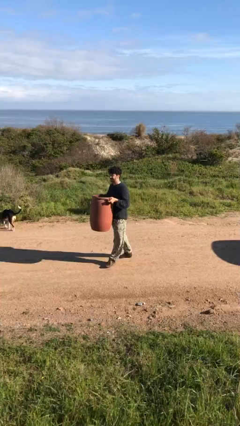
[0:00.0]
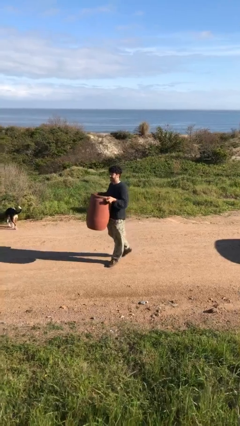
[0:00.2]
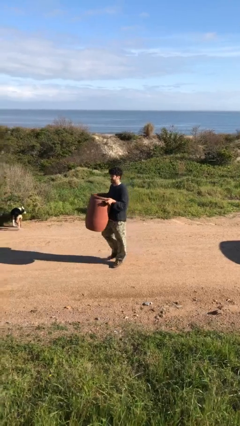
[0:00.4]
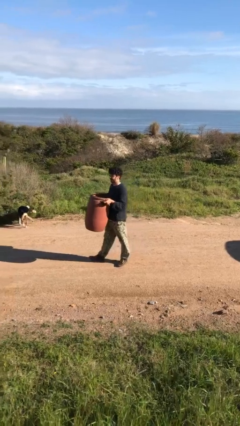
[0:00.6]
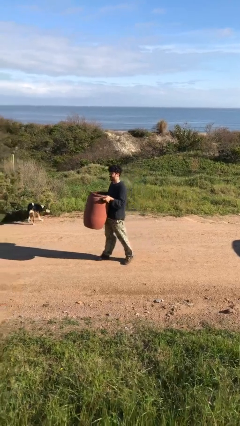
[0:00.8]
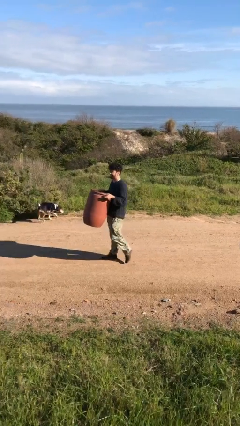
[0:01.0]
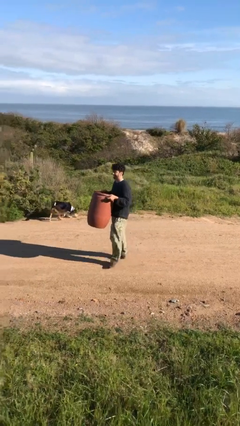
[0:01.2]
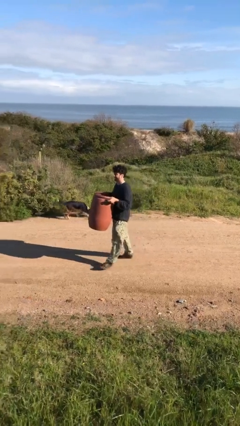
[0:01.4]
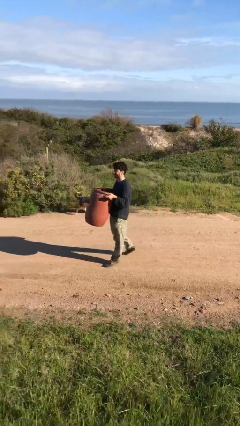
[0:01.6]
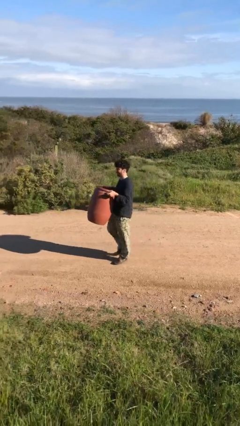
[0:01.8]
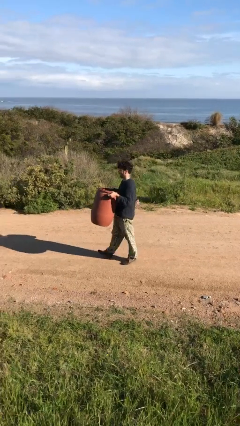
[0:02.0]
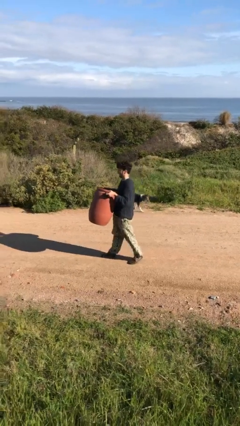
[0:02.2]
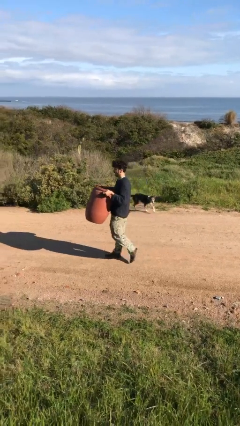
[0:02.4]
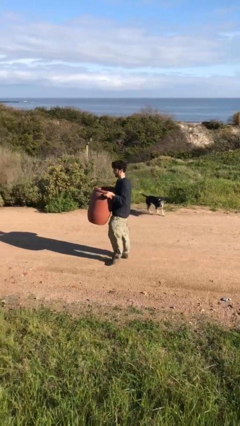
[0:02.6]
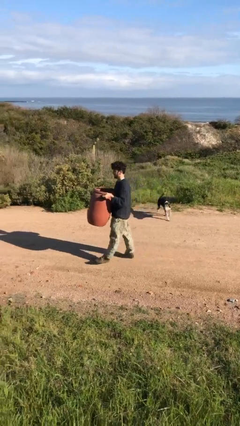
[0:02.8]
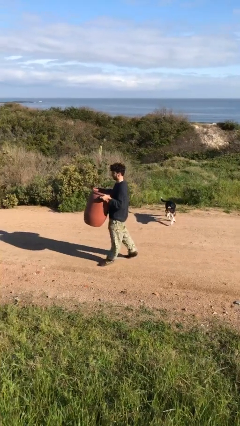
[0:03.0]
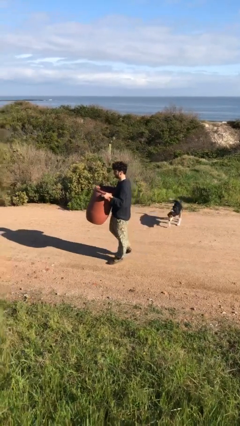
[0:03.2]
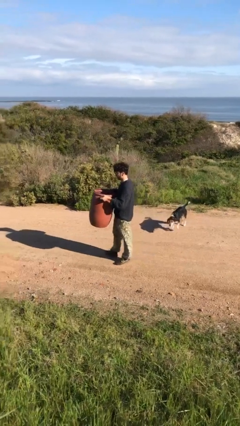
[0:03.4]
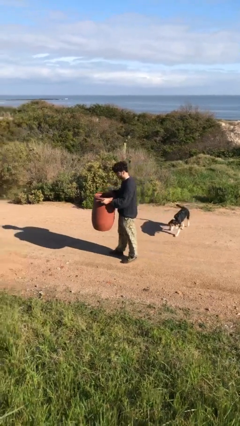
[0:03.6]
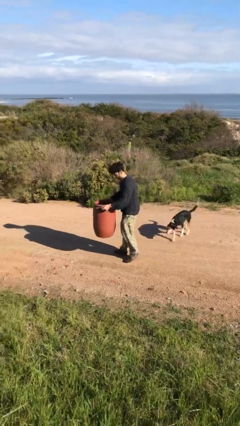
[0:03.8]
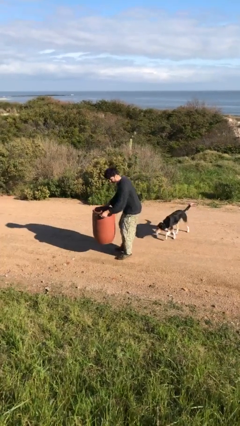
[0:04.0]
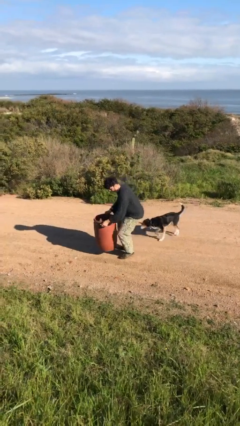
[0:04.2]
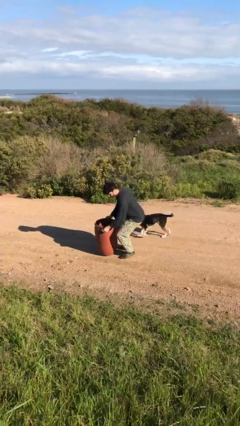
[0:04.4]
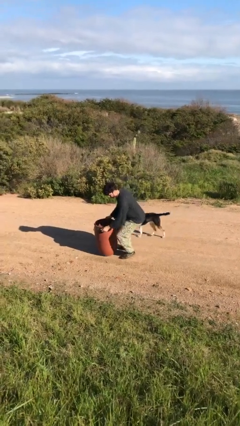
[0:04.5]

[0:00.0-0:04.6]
person carries heavy object

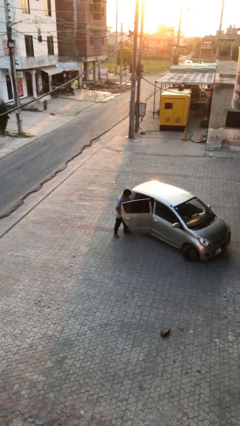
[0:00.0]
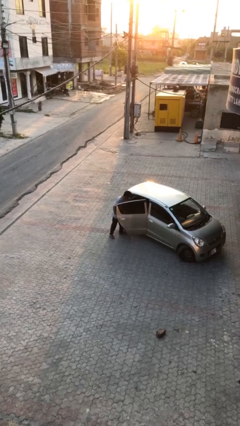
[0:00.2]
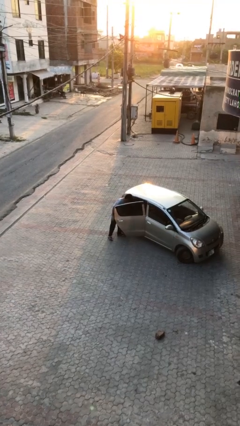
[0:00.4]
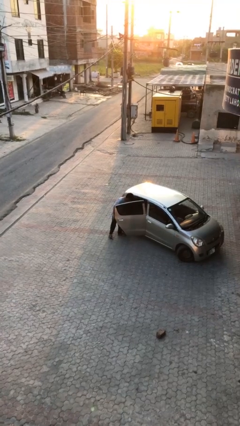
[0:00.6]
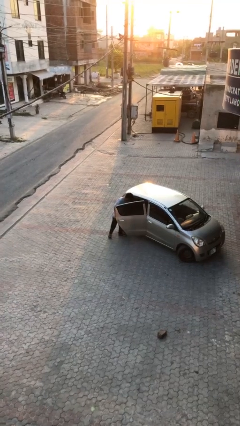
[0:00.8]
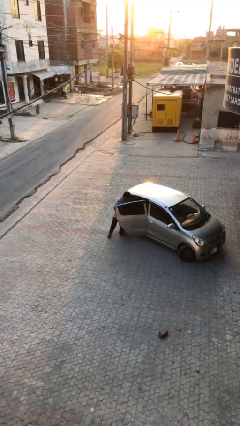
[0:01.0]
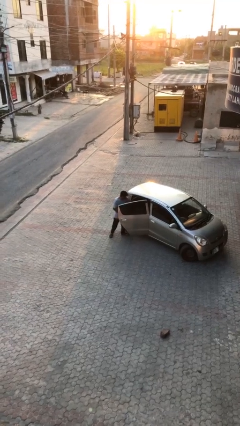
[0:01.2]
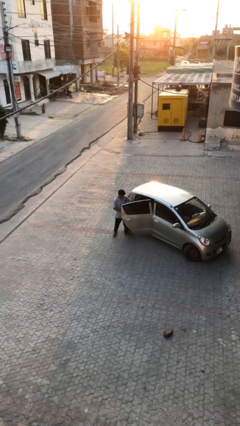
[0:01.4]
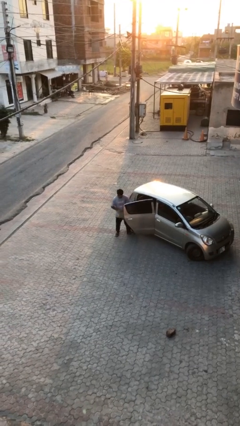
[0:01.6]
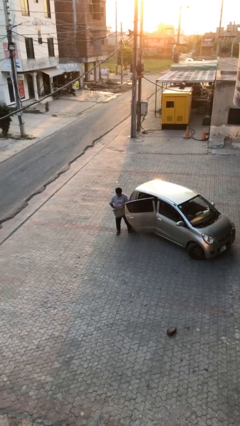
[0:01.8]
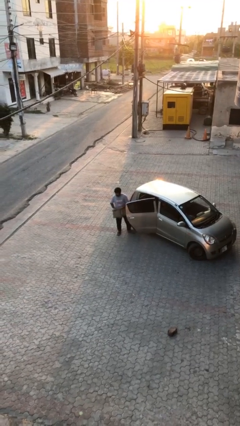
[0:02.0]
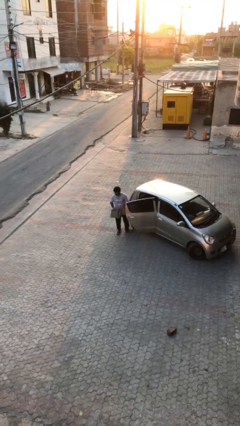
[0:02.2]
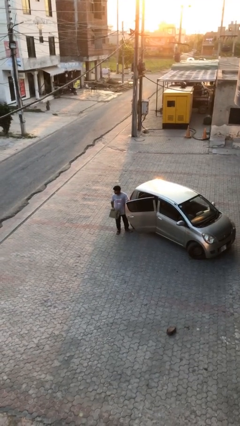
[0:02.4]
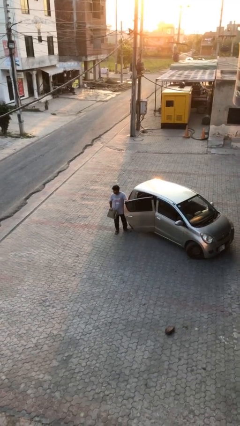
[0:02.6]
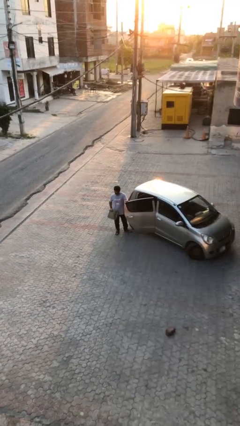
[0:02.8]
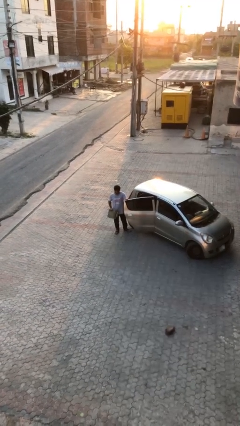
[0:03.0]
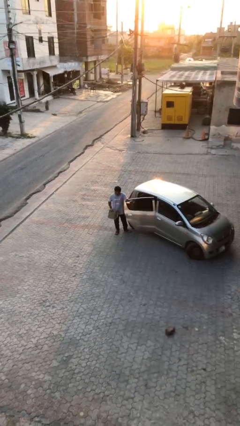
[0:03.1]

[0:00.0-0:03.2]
person unloads car

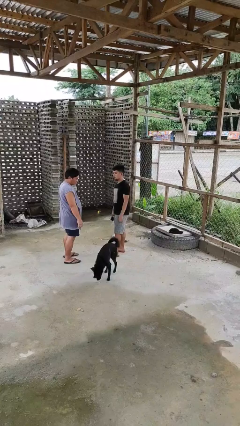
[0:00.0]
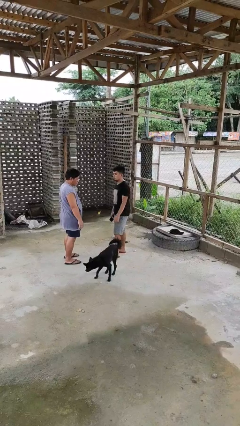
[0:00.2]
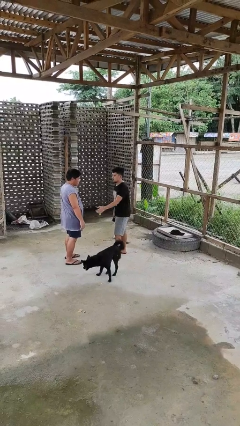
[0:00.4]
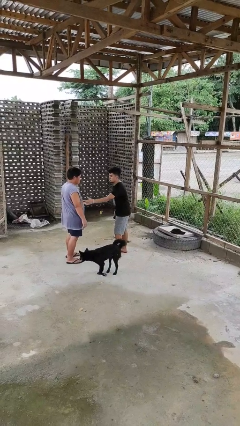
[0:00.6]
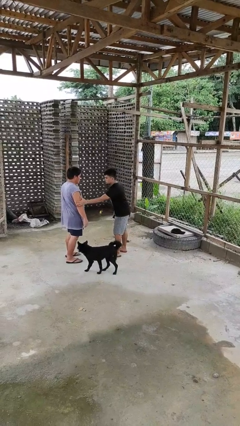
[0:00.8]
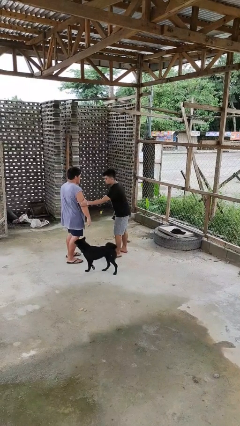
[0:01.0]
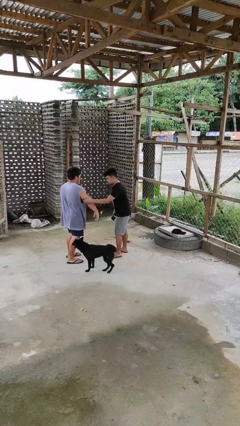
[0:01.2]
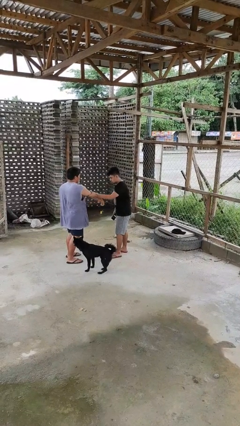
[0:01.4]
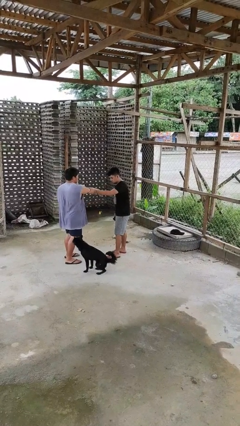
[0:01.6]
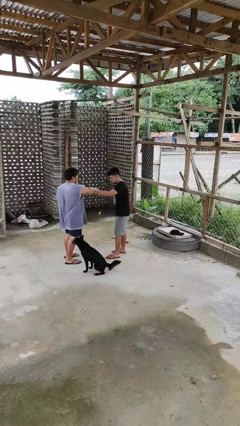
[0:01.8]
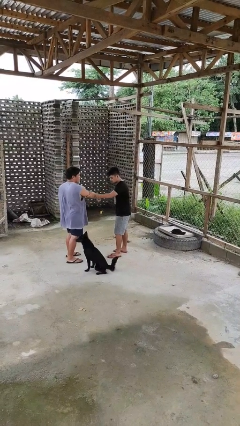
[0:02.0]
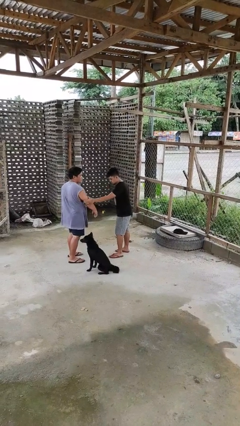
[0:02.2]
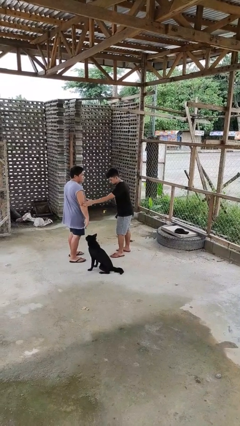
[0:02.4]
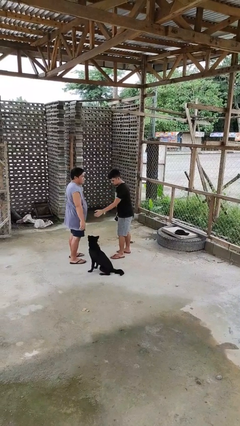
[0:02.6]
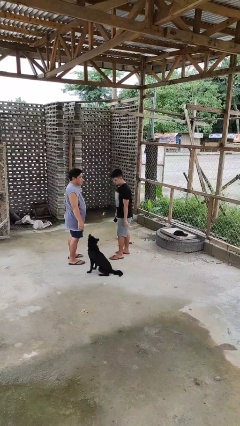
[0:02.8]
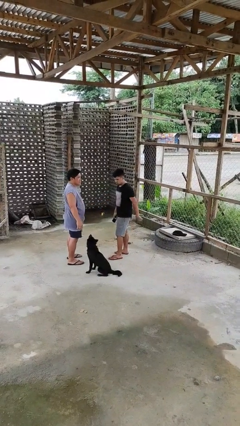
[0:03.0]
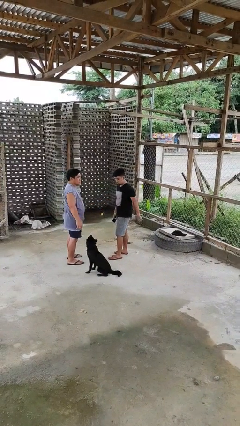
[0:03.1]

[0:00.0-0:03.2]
person grabs person by bicep

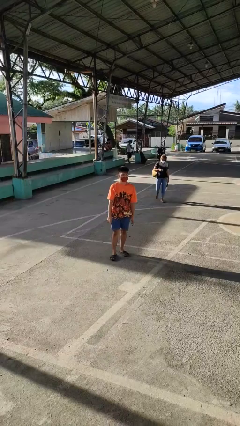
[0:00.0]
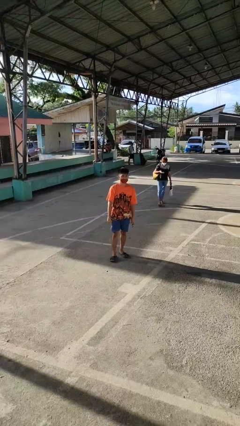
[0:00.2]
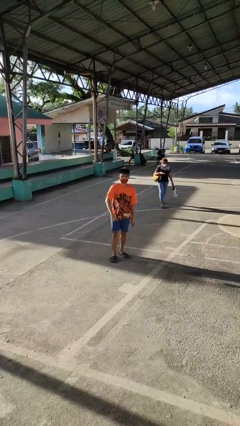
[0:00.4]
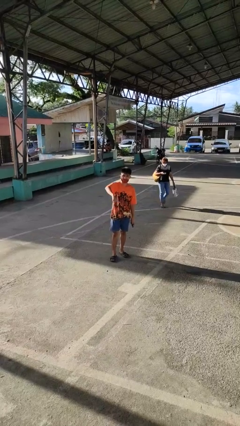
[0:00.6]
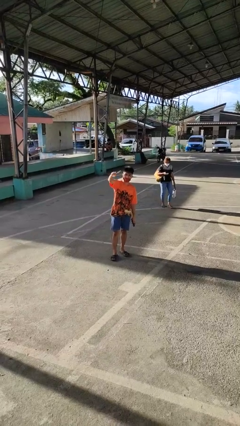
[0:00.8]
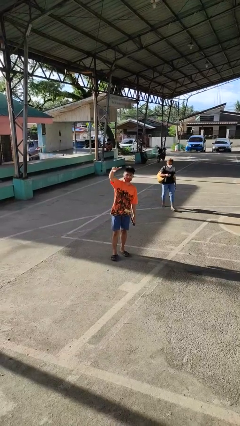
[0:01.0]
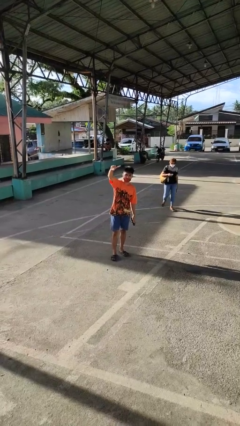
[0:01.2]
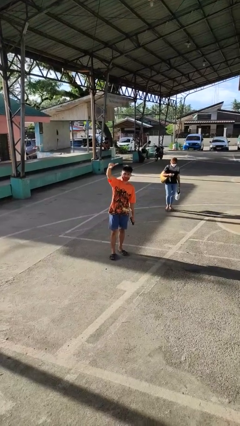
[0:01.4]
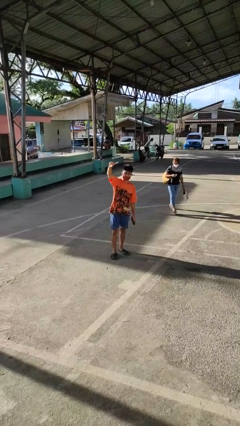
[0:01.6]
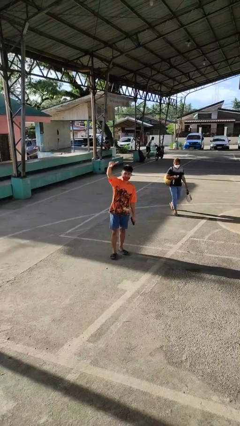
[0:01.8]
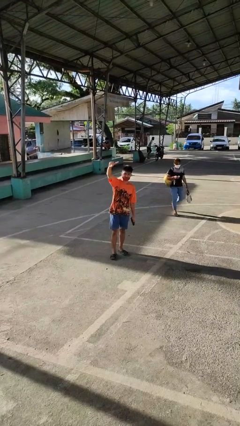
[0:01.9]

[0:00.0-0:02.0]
person gestures swipe up

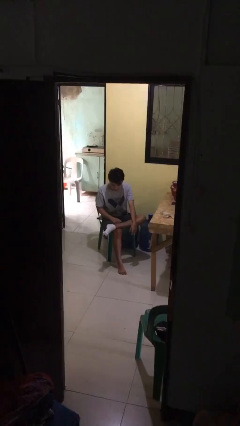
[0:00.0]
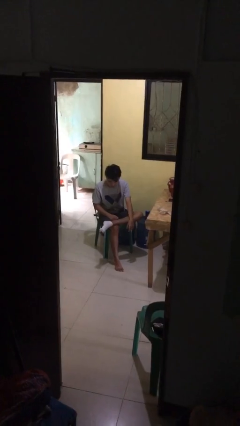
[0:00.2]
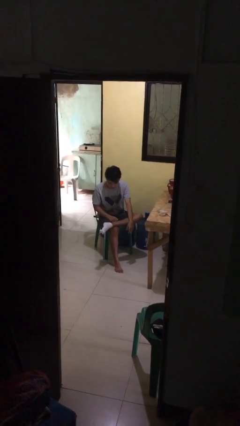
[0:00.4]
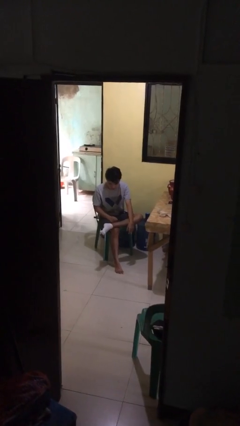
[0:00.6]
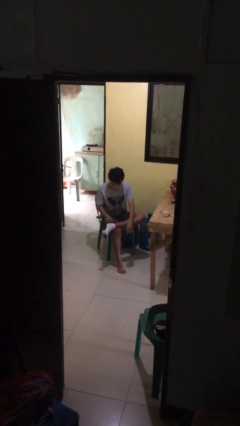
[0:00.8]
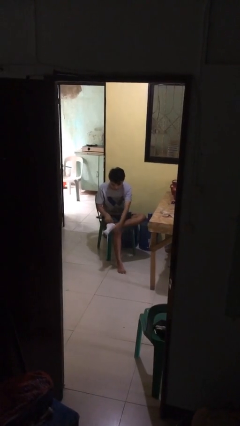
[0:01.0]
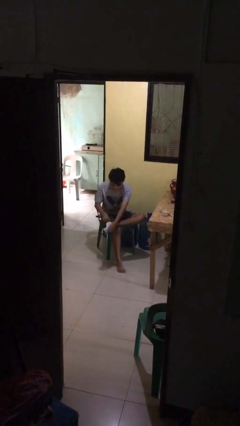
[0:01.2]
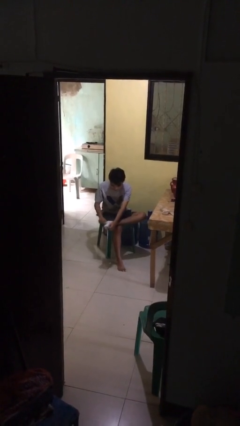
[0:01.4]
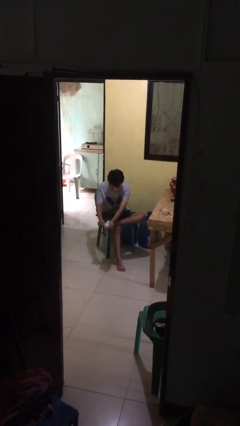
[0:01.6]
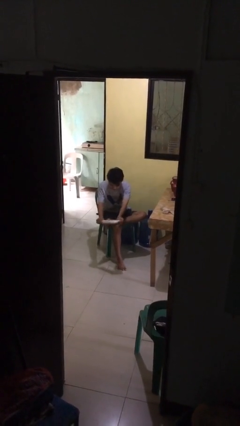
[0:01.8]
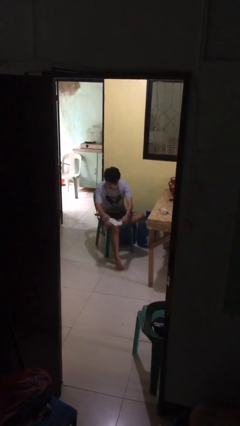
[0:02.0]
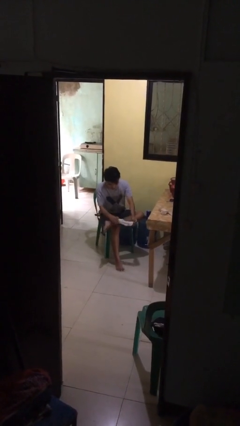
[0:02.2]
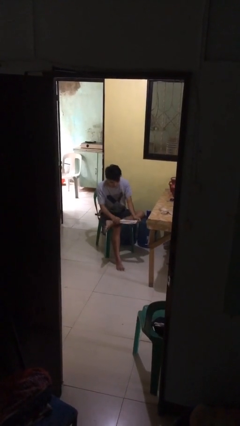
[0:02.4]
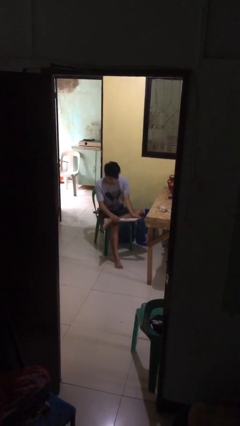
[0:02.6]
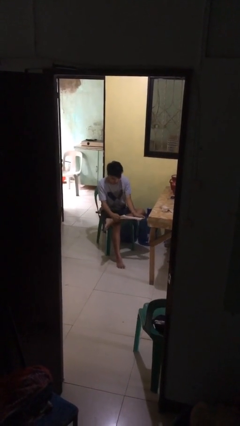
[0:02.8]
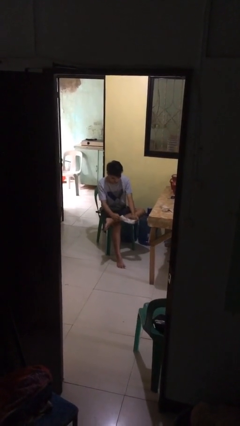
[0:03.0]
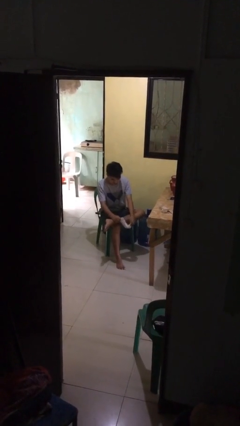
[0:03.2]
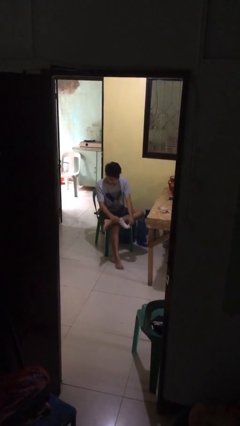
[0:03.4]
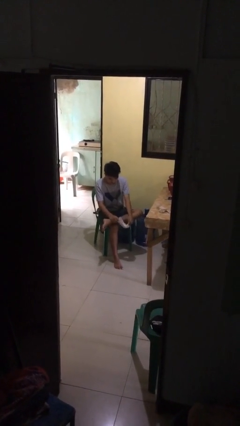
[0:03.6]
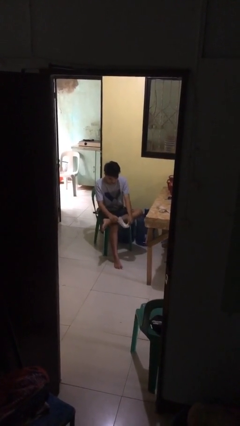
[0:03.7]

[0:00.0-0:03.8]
person takes off socks

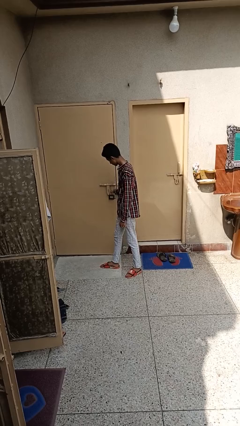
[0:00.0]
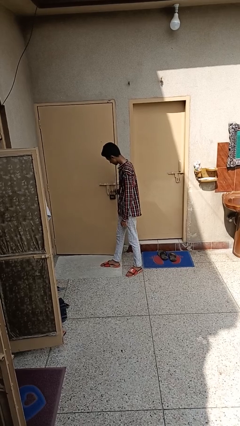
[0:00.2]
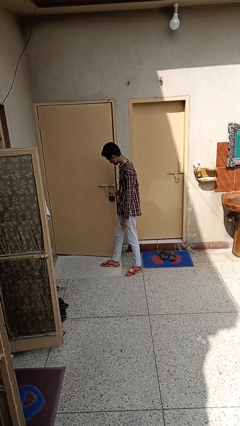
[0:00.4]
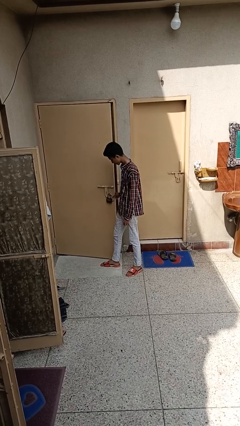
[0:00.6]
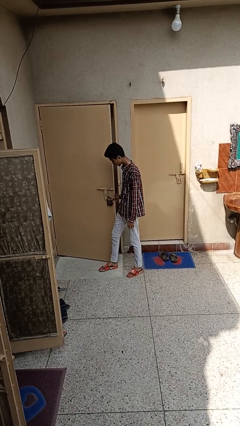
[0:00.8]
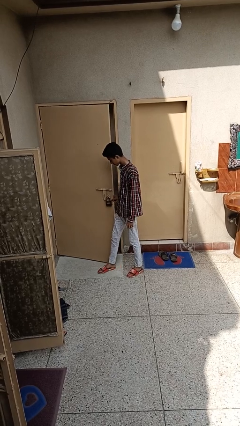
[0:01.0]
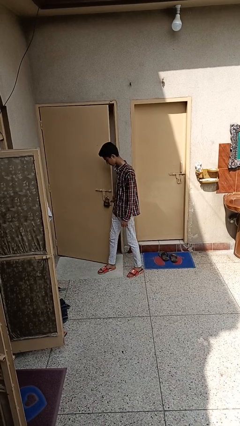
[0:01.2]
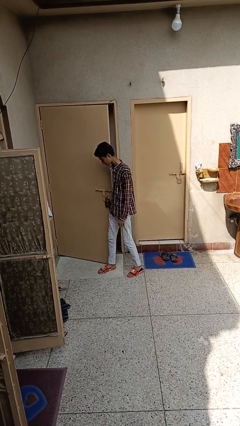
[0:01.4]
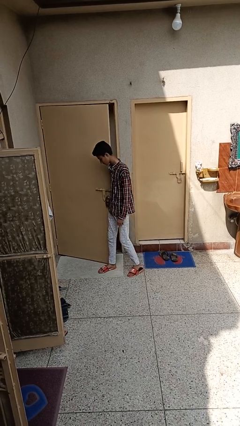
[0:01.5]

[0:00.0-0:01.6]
person opens facility door
